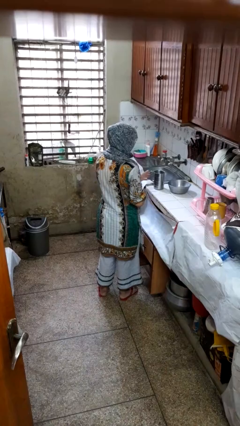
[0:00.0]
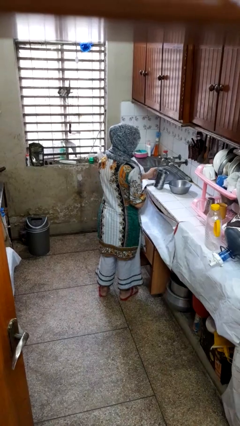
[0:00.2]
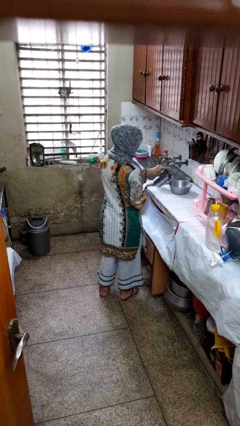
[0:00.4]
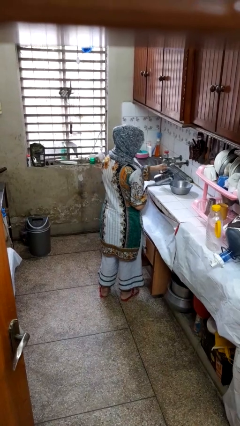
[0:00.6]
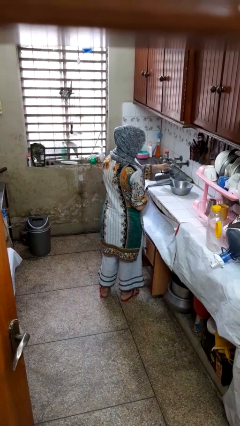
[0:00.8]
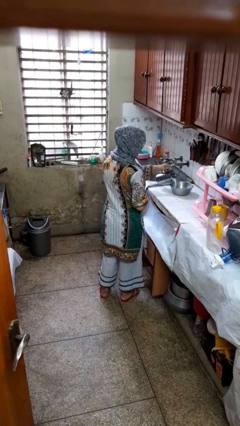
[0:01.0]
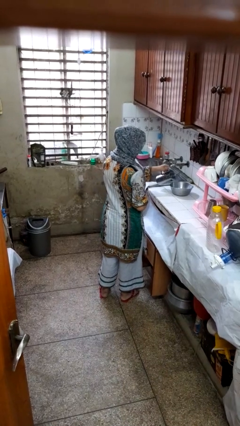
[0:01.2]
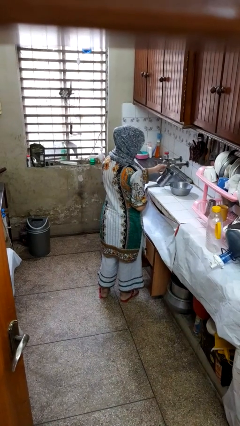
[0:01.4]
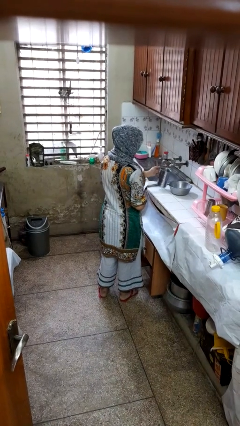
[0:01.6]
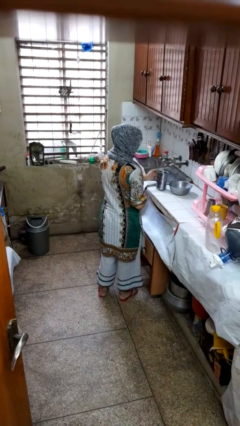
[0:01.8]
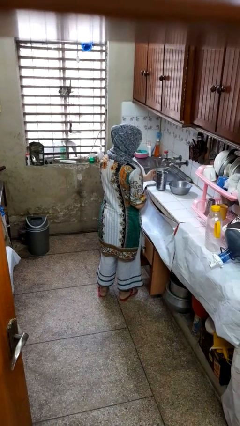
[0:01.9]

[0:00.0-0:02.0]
person pours into bowl

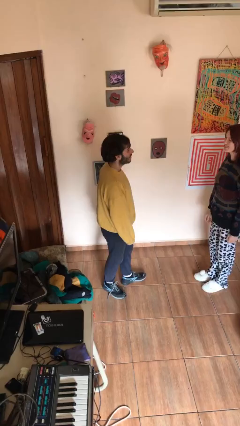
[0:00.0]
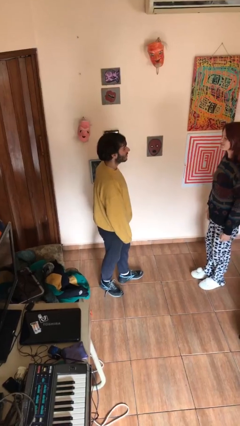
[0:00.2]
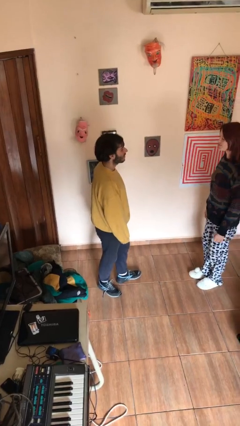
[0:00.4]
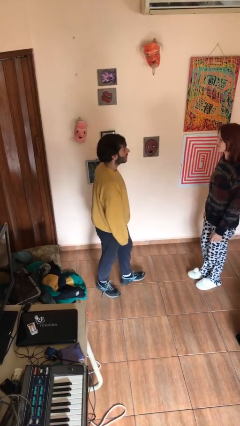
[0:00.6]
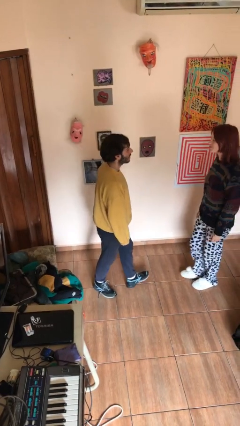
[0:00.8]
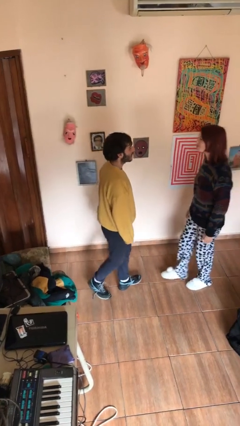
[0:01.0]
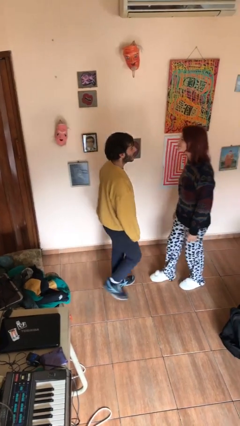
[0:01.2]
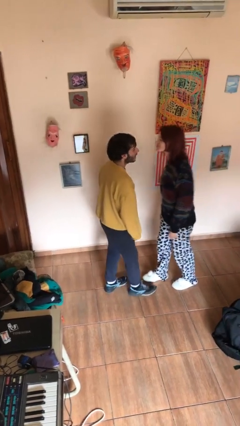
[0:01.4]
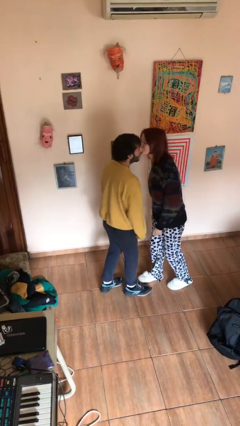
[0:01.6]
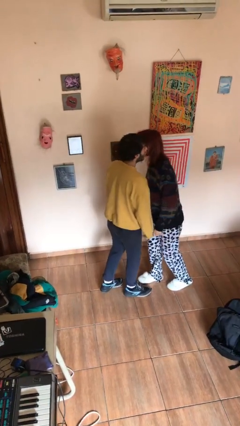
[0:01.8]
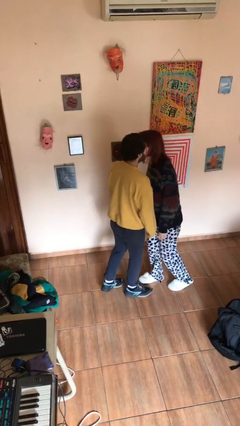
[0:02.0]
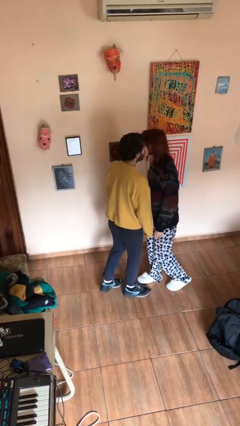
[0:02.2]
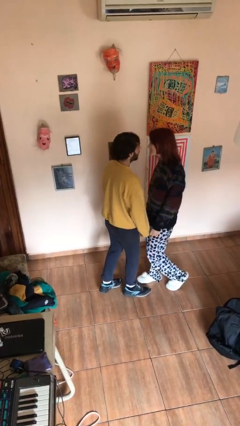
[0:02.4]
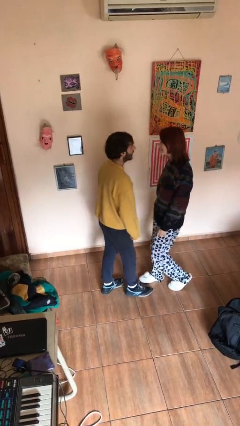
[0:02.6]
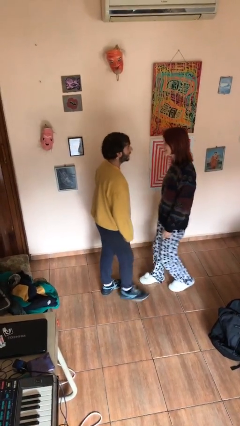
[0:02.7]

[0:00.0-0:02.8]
person kisses cheek of person

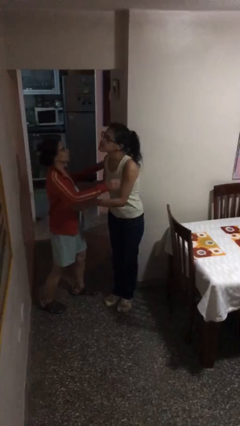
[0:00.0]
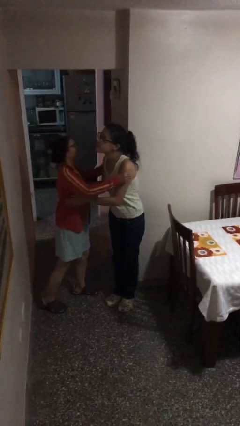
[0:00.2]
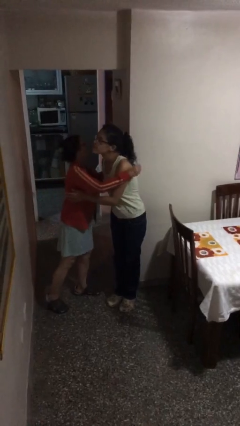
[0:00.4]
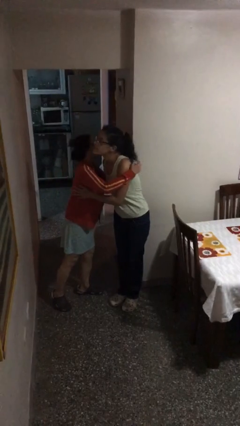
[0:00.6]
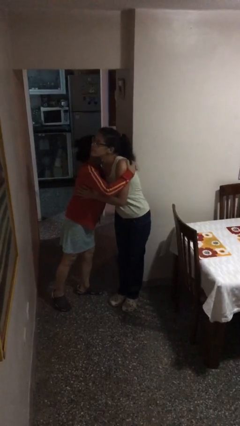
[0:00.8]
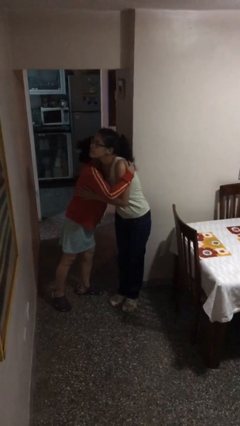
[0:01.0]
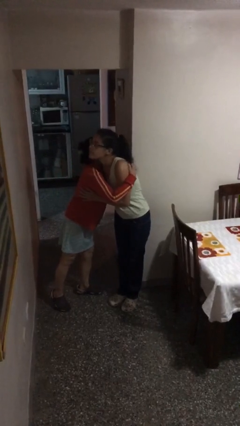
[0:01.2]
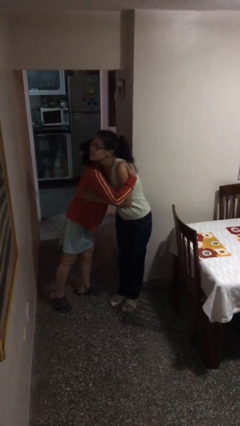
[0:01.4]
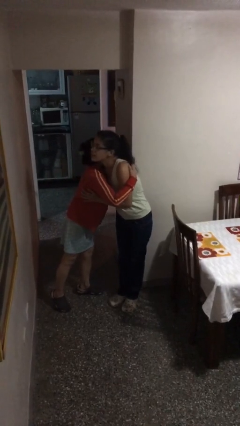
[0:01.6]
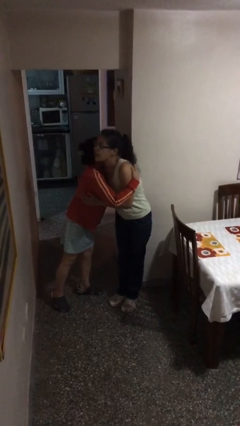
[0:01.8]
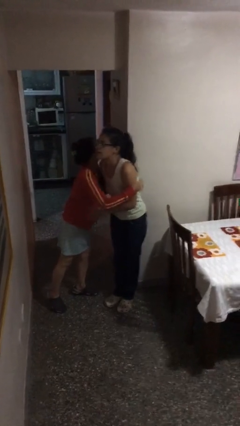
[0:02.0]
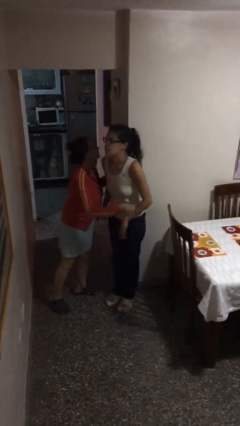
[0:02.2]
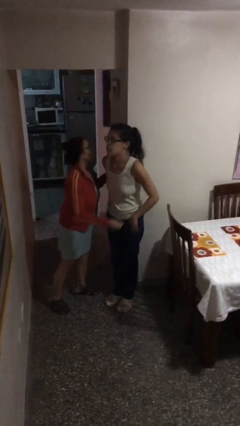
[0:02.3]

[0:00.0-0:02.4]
person embraces person

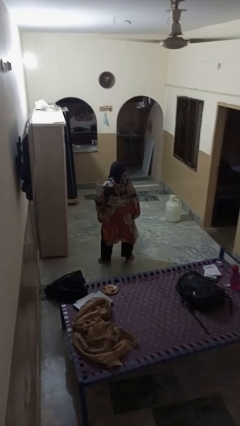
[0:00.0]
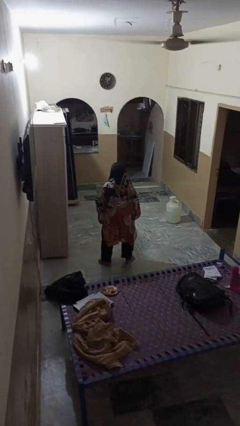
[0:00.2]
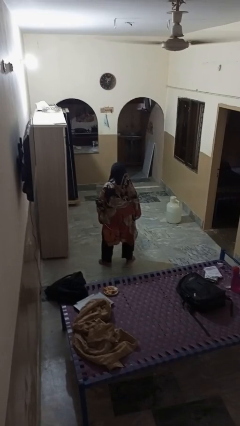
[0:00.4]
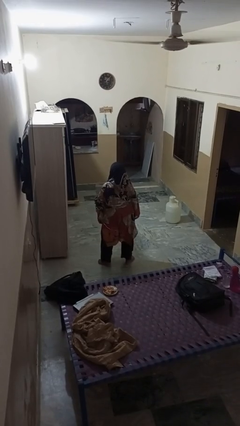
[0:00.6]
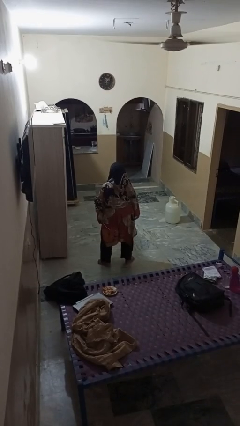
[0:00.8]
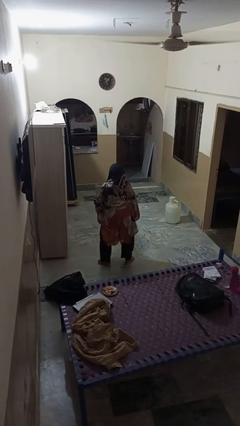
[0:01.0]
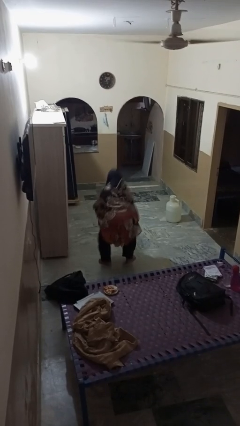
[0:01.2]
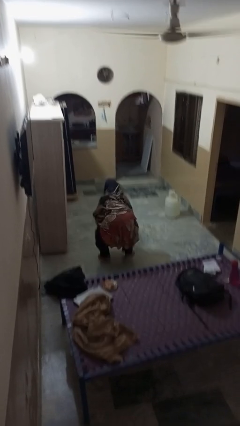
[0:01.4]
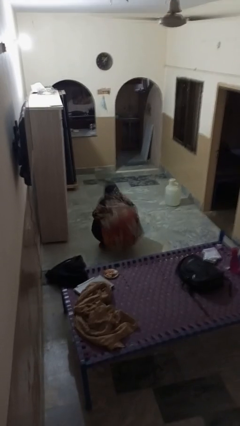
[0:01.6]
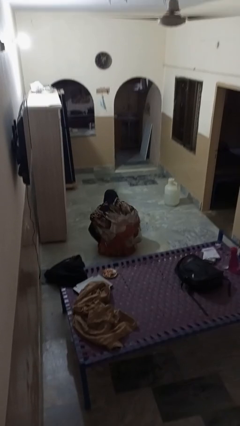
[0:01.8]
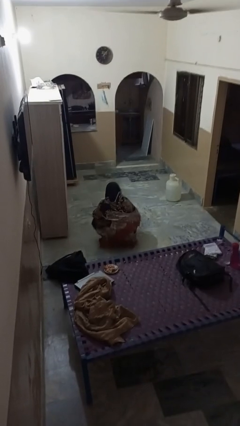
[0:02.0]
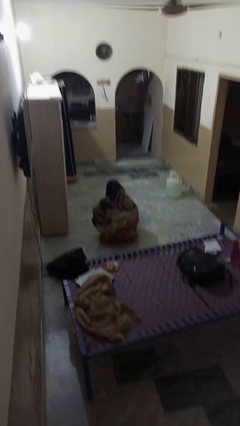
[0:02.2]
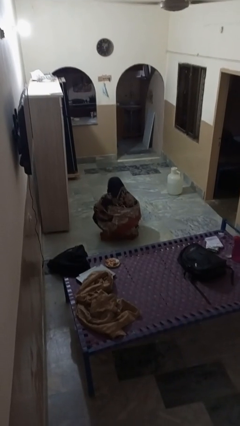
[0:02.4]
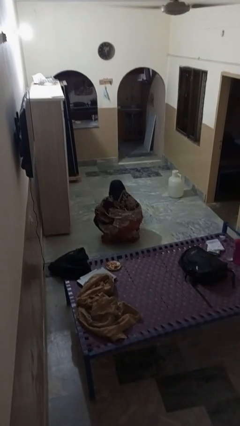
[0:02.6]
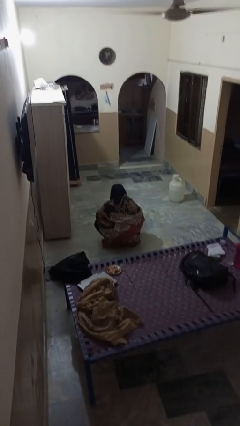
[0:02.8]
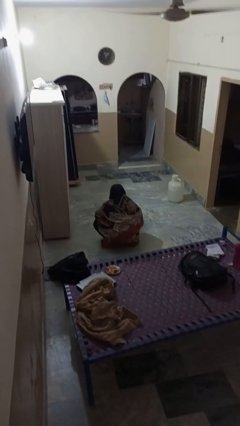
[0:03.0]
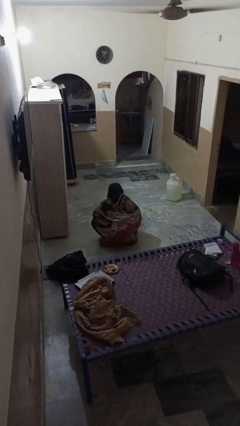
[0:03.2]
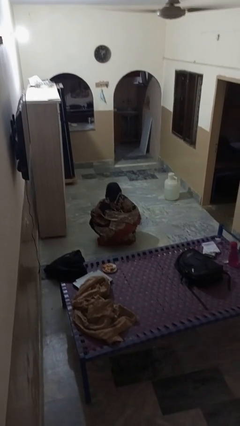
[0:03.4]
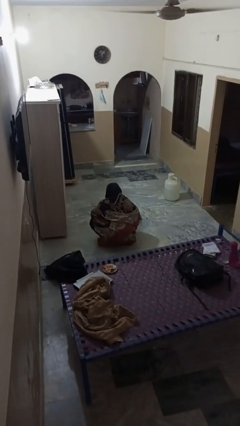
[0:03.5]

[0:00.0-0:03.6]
person squats

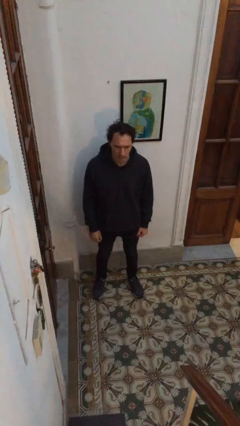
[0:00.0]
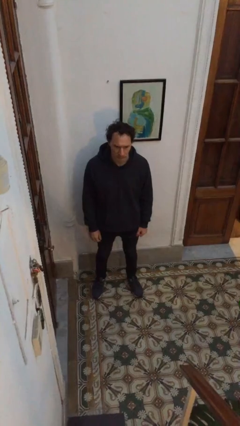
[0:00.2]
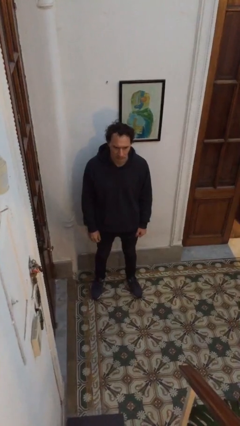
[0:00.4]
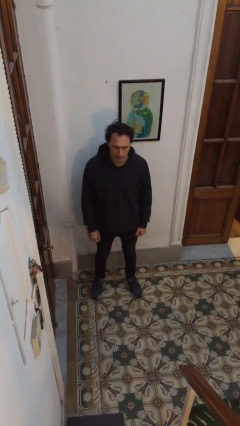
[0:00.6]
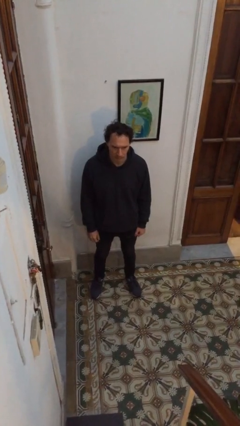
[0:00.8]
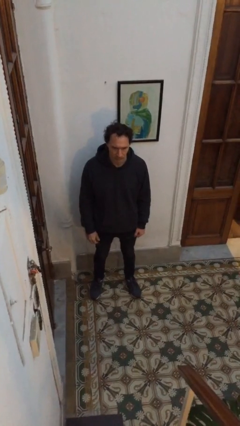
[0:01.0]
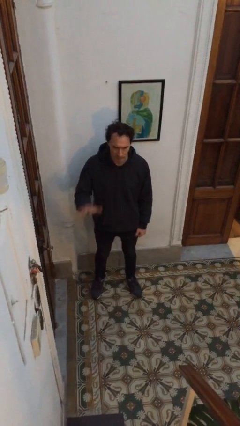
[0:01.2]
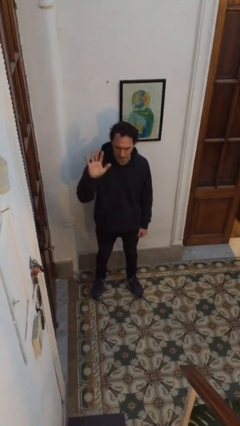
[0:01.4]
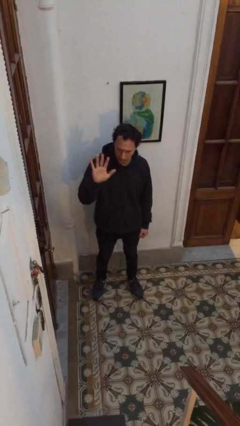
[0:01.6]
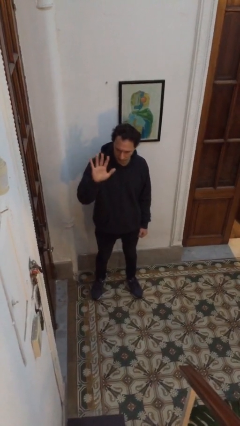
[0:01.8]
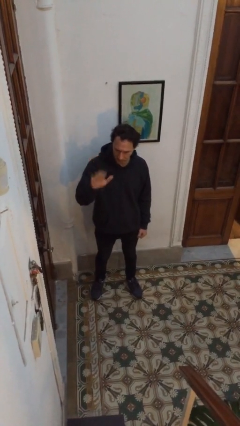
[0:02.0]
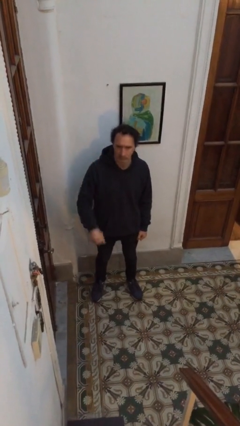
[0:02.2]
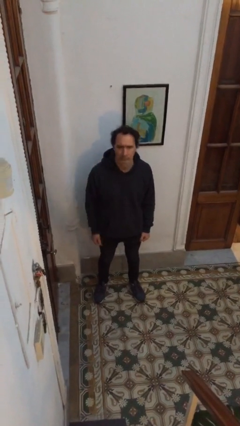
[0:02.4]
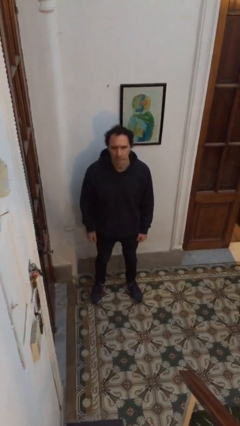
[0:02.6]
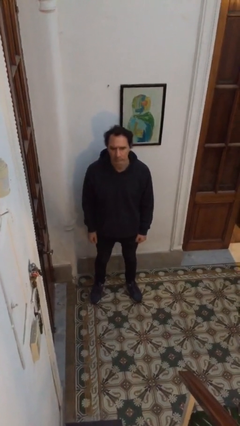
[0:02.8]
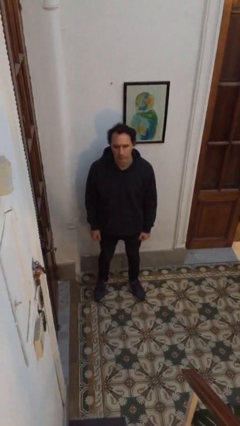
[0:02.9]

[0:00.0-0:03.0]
person gestures number five

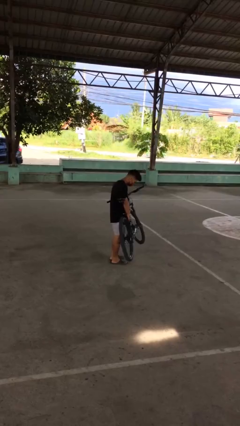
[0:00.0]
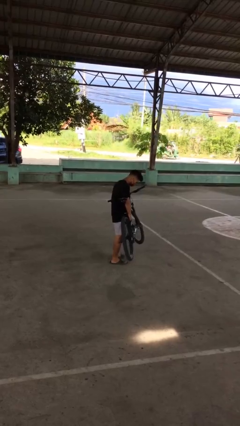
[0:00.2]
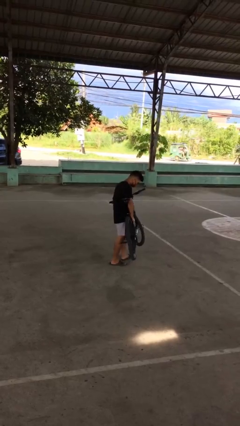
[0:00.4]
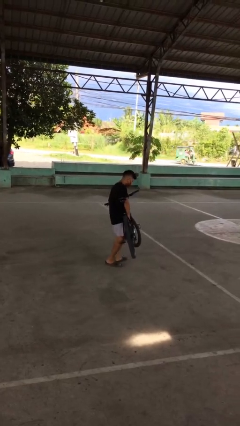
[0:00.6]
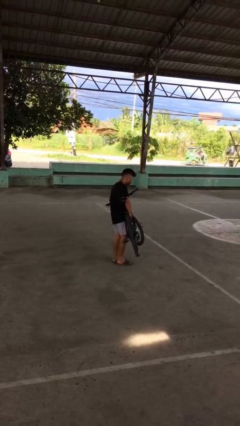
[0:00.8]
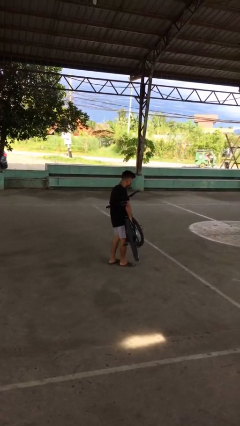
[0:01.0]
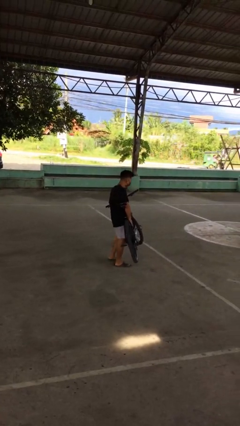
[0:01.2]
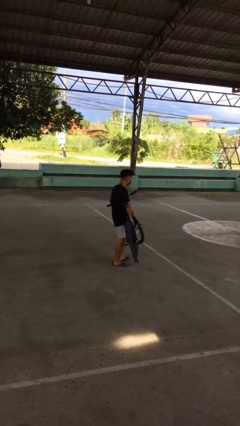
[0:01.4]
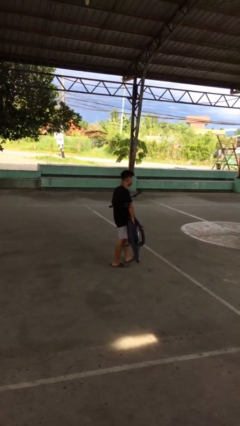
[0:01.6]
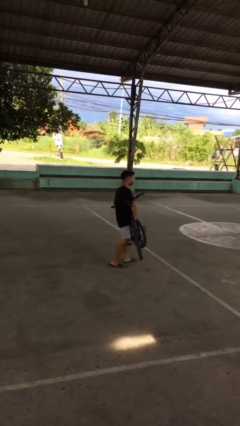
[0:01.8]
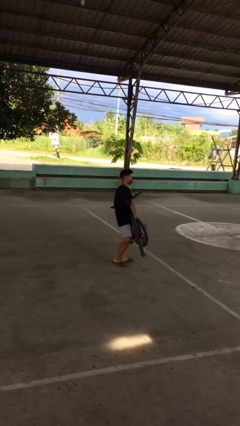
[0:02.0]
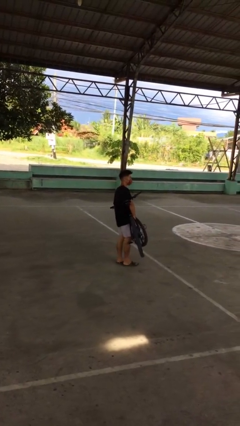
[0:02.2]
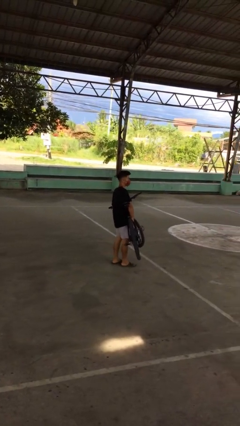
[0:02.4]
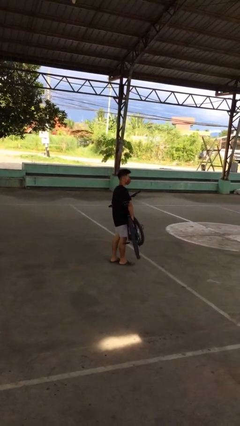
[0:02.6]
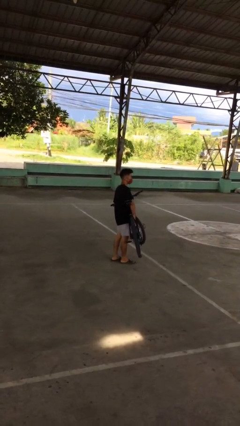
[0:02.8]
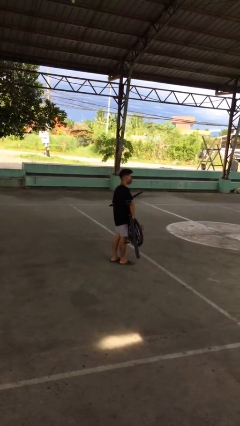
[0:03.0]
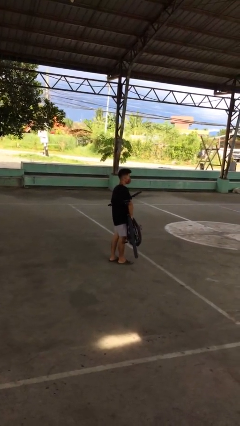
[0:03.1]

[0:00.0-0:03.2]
person carries bicycle
